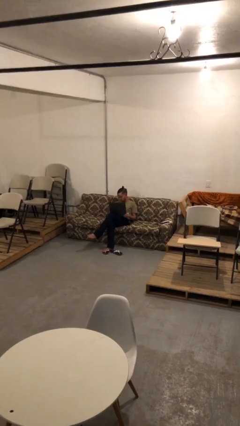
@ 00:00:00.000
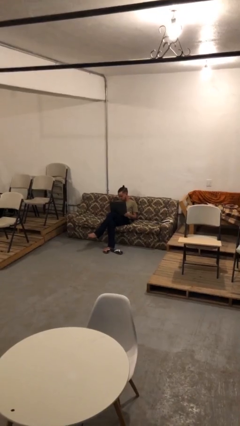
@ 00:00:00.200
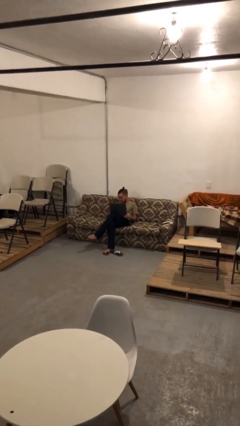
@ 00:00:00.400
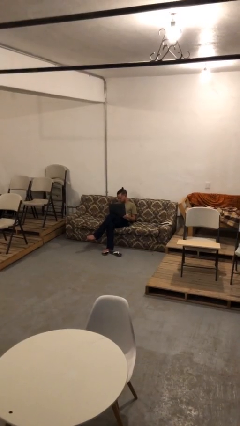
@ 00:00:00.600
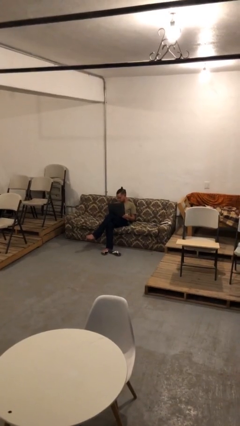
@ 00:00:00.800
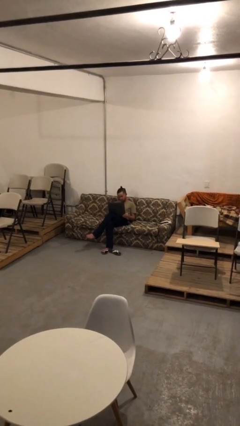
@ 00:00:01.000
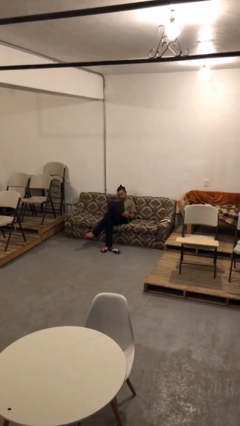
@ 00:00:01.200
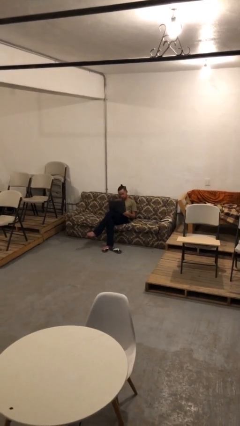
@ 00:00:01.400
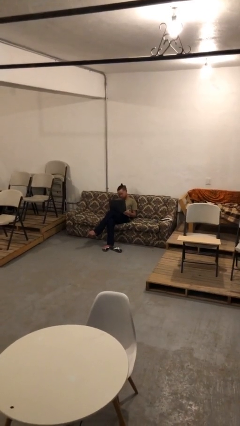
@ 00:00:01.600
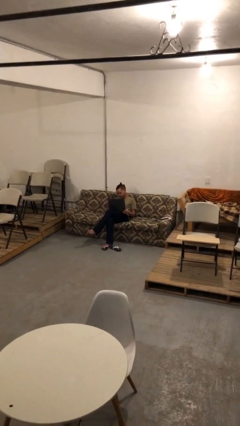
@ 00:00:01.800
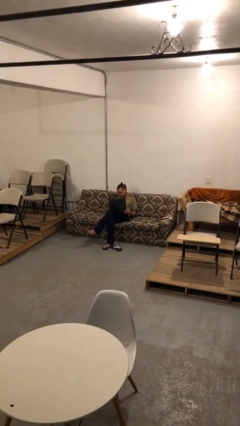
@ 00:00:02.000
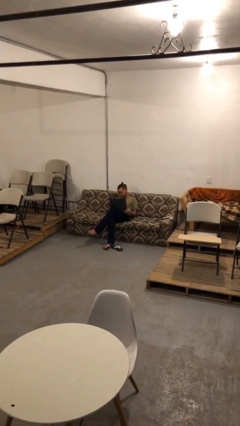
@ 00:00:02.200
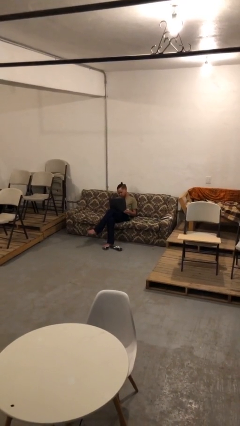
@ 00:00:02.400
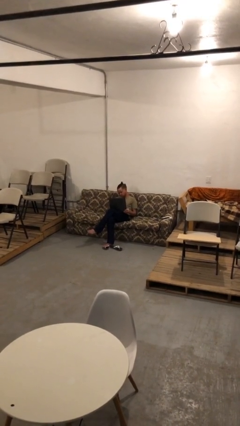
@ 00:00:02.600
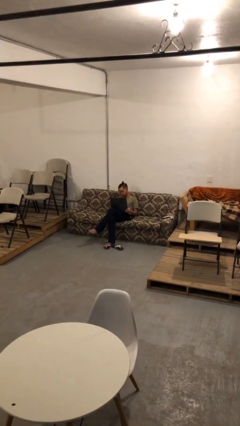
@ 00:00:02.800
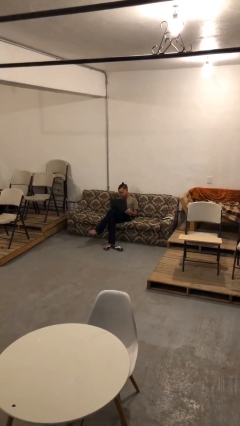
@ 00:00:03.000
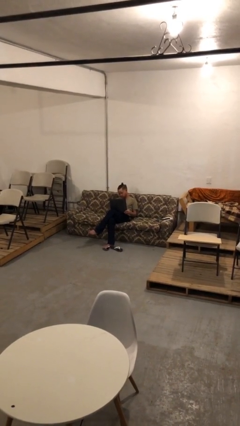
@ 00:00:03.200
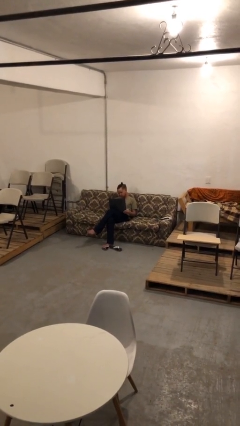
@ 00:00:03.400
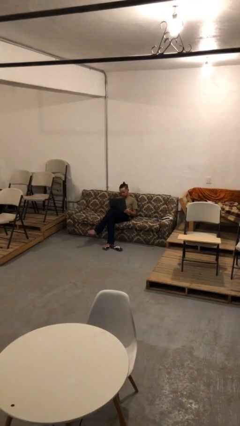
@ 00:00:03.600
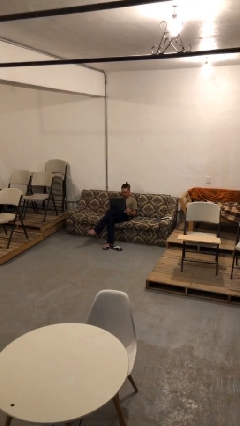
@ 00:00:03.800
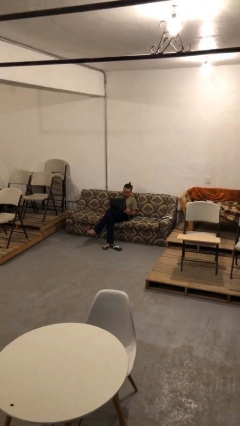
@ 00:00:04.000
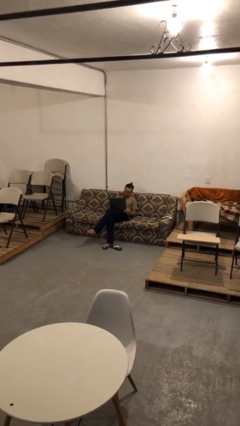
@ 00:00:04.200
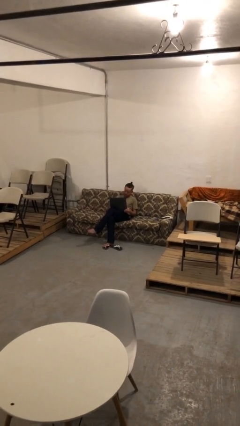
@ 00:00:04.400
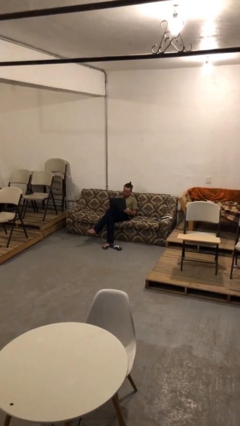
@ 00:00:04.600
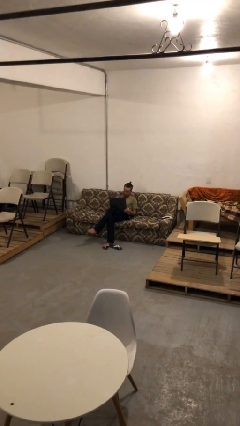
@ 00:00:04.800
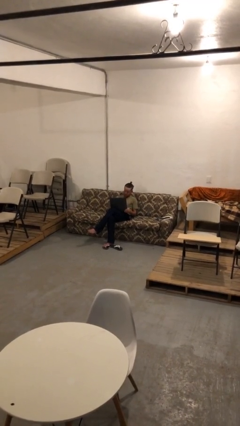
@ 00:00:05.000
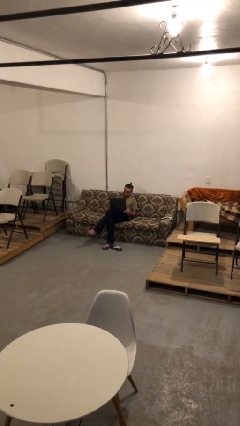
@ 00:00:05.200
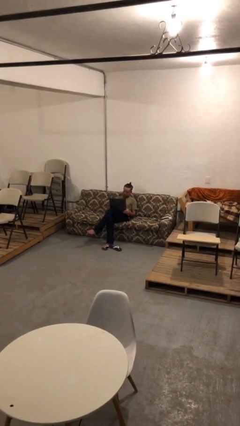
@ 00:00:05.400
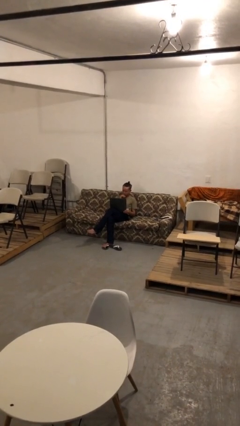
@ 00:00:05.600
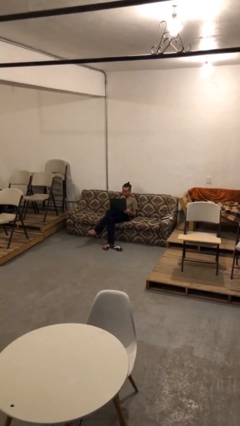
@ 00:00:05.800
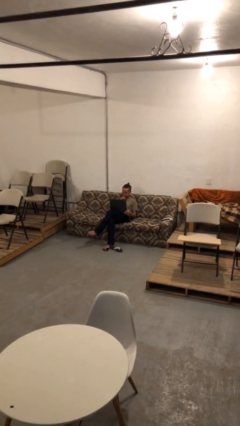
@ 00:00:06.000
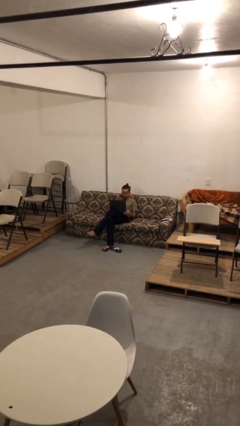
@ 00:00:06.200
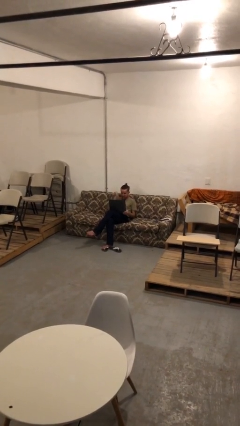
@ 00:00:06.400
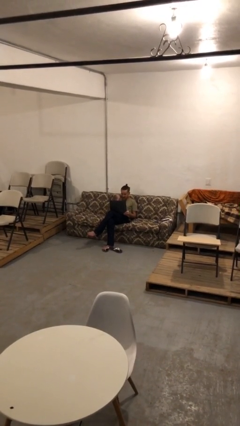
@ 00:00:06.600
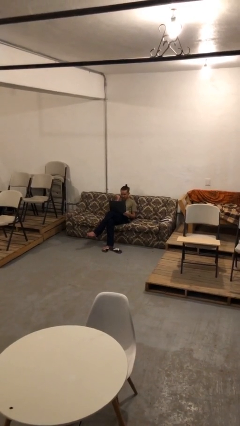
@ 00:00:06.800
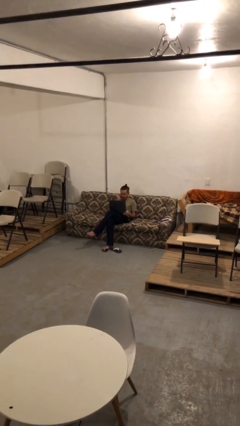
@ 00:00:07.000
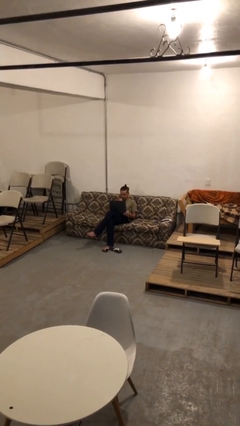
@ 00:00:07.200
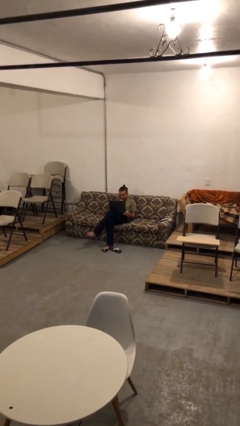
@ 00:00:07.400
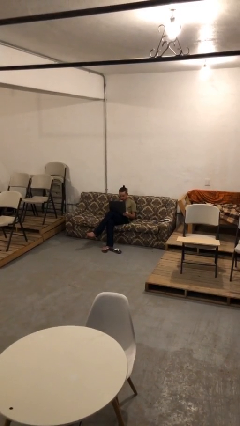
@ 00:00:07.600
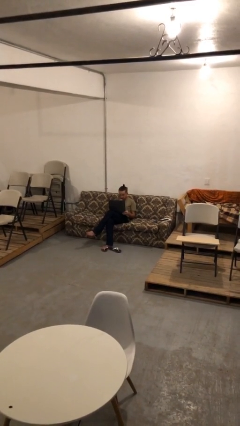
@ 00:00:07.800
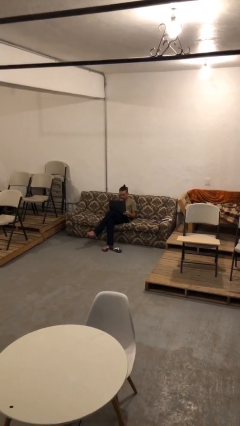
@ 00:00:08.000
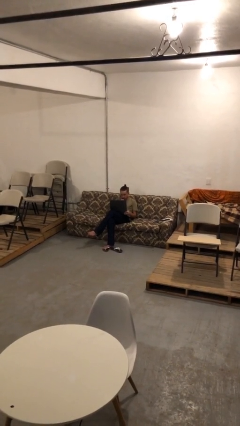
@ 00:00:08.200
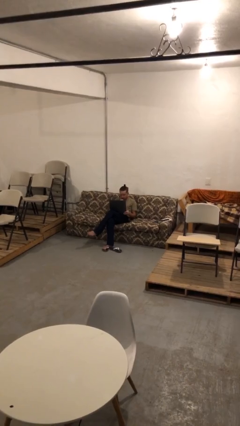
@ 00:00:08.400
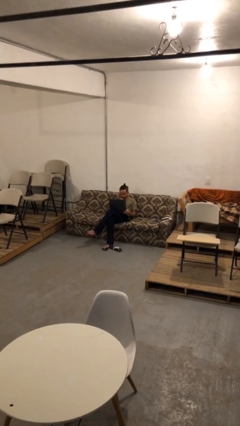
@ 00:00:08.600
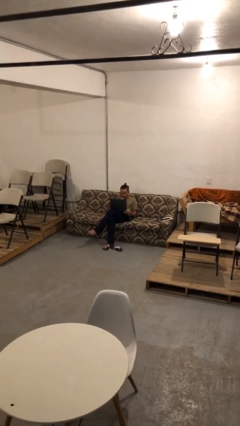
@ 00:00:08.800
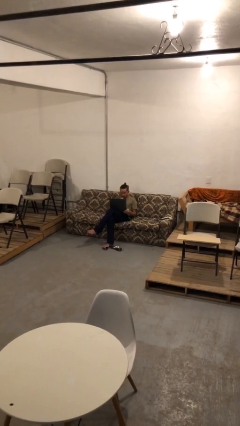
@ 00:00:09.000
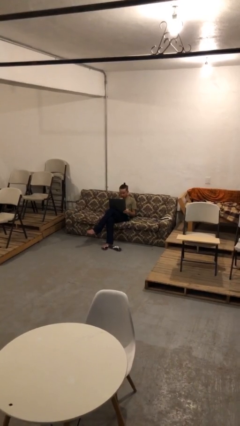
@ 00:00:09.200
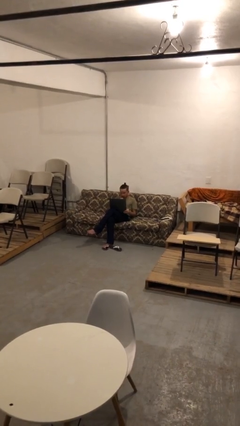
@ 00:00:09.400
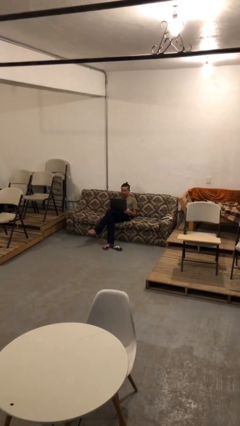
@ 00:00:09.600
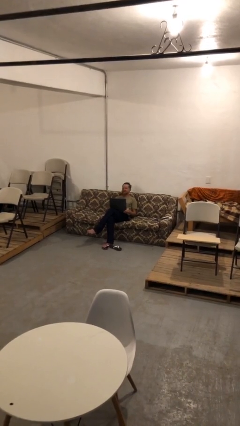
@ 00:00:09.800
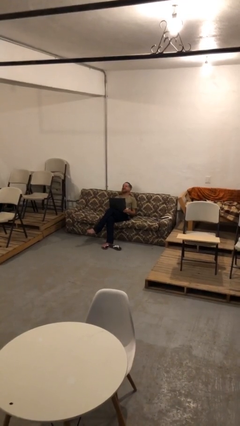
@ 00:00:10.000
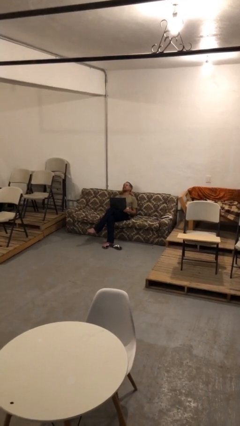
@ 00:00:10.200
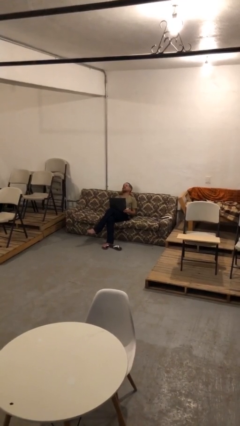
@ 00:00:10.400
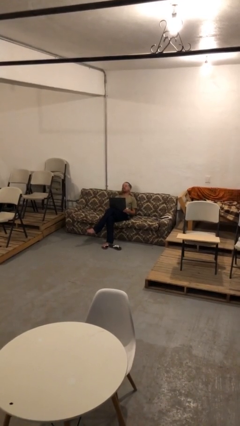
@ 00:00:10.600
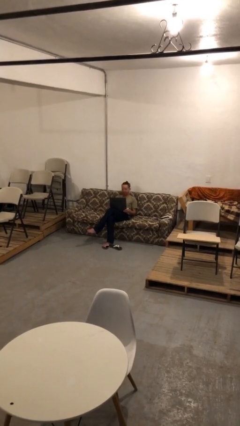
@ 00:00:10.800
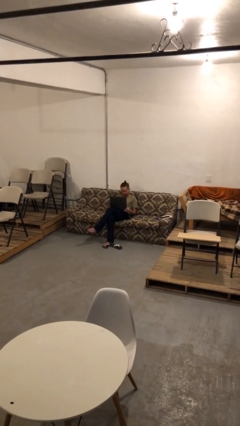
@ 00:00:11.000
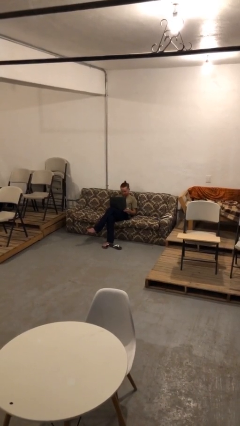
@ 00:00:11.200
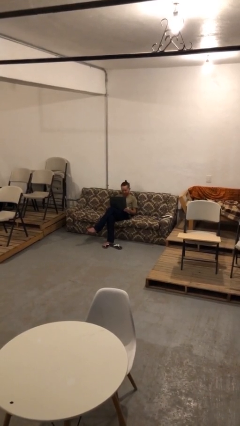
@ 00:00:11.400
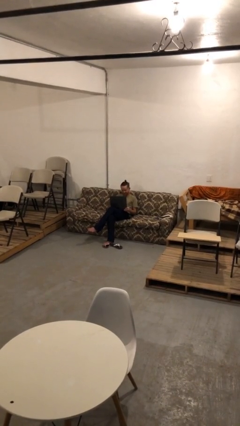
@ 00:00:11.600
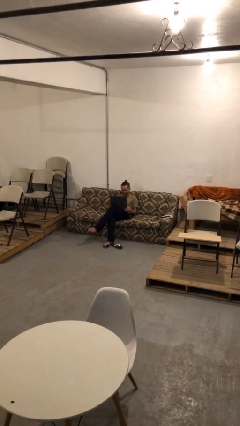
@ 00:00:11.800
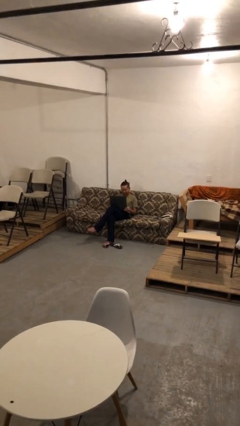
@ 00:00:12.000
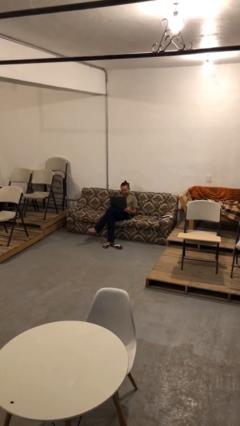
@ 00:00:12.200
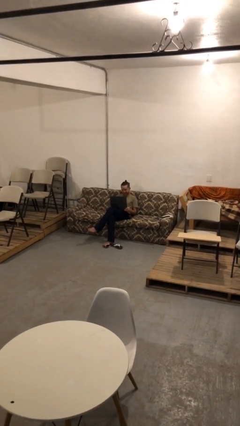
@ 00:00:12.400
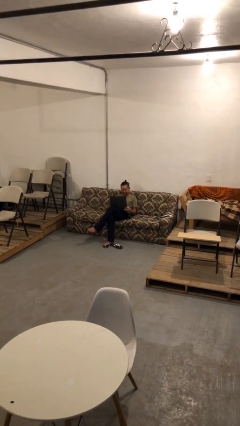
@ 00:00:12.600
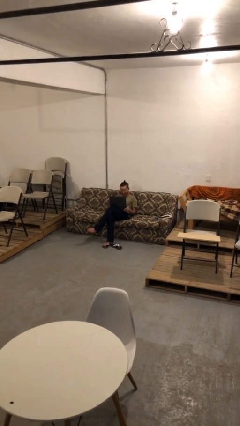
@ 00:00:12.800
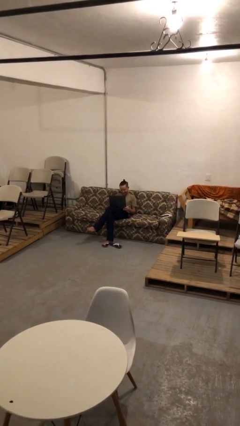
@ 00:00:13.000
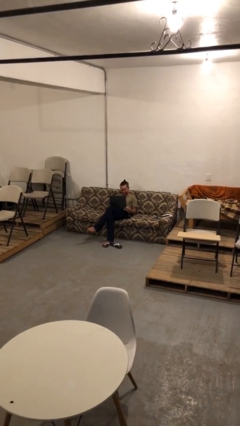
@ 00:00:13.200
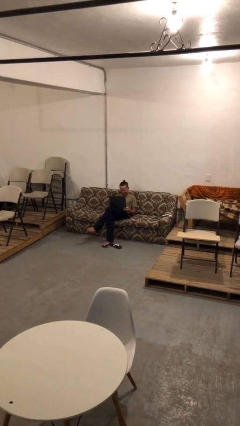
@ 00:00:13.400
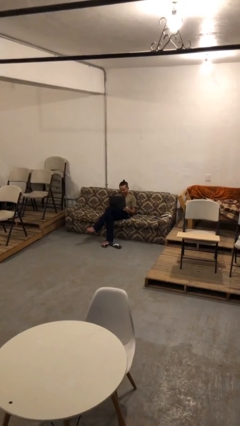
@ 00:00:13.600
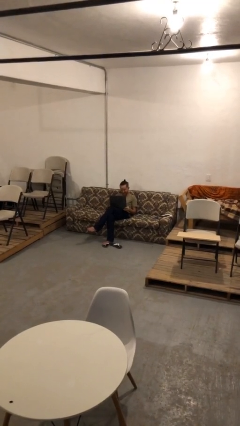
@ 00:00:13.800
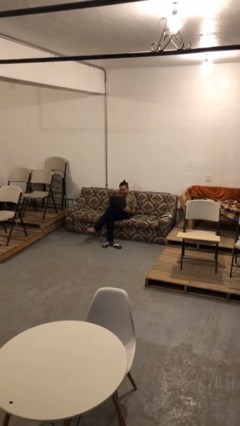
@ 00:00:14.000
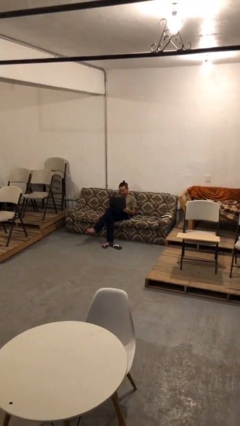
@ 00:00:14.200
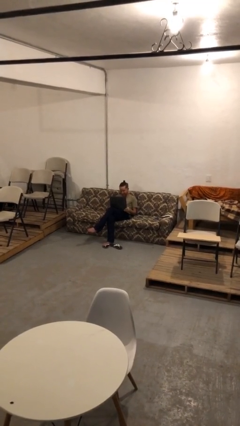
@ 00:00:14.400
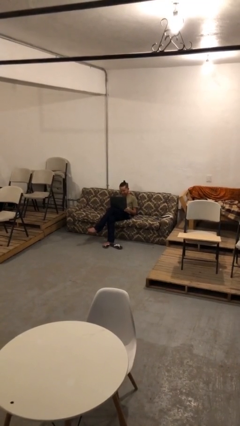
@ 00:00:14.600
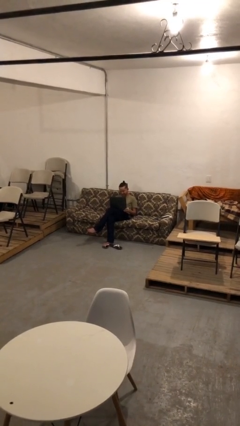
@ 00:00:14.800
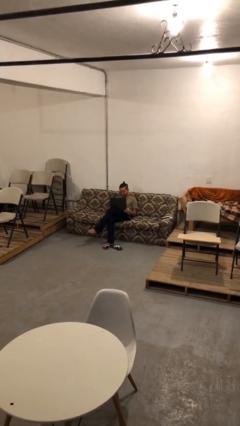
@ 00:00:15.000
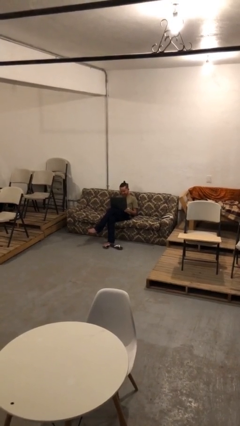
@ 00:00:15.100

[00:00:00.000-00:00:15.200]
person interacts with laptop

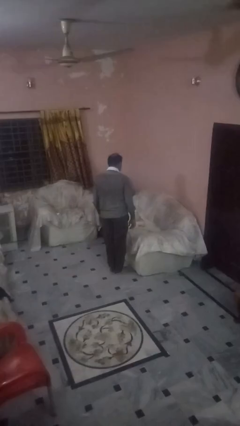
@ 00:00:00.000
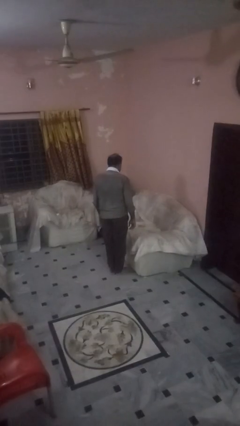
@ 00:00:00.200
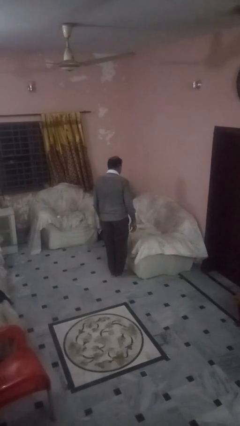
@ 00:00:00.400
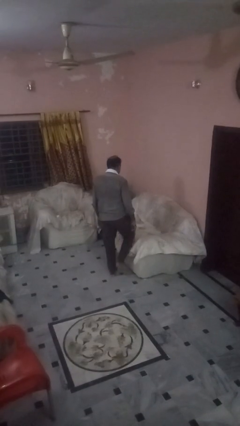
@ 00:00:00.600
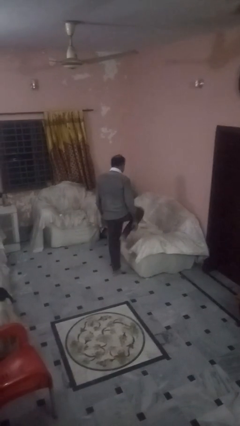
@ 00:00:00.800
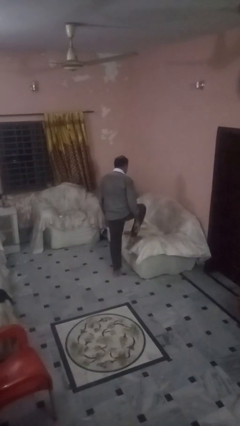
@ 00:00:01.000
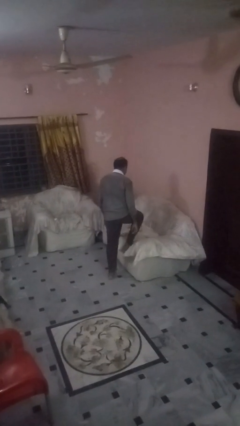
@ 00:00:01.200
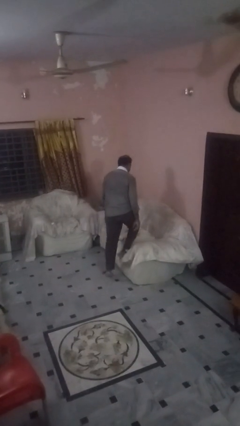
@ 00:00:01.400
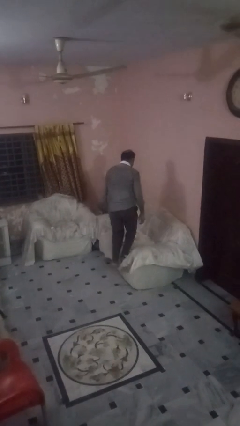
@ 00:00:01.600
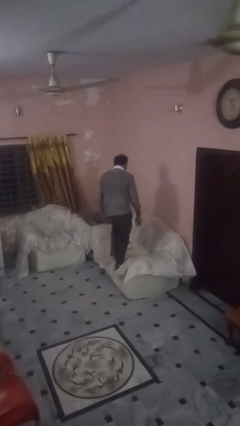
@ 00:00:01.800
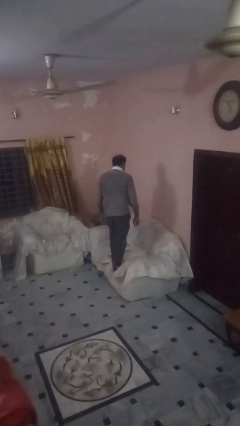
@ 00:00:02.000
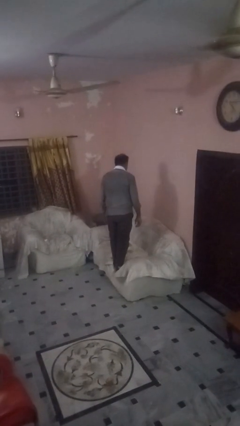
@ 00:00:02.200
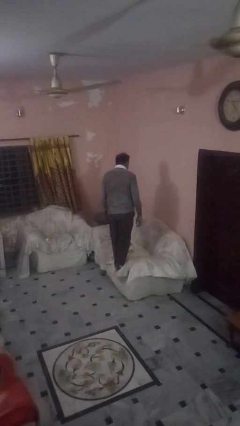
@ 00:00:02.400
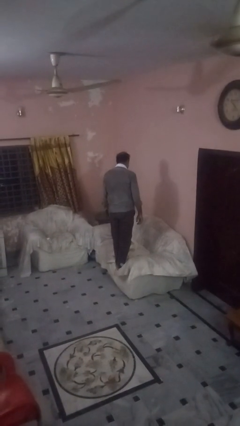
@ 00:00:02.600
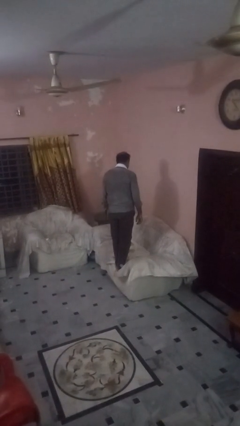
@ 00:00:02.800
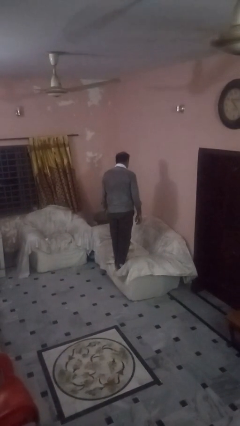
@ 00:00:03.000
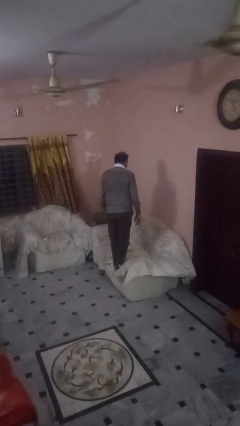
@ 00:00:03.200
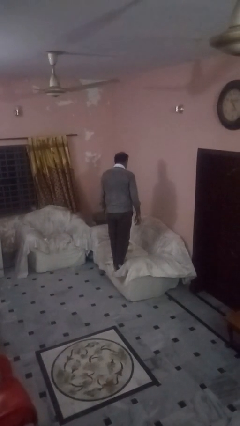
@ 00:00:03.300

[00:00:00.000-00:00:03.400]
person climbs on couch
